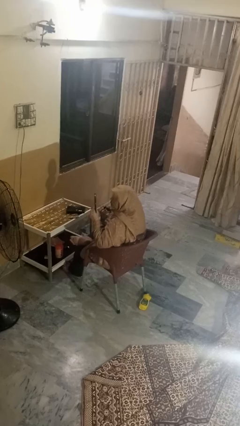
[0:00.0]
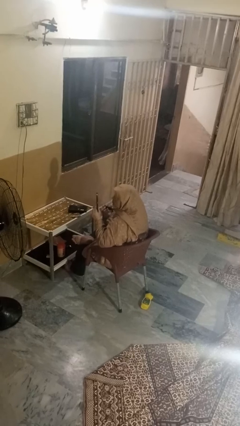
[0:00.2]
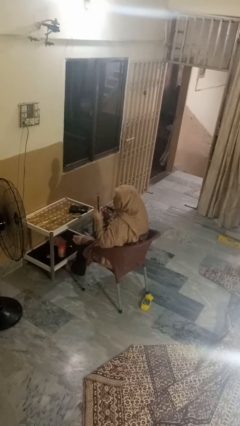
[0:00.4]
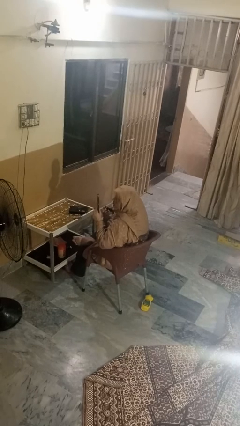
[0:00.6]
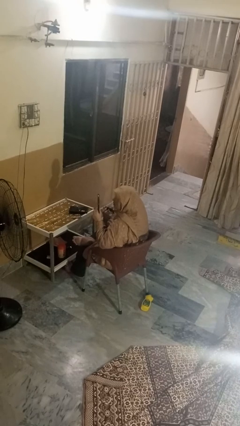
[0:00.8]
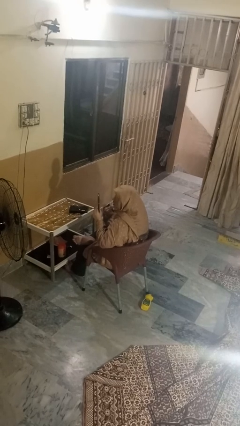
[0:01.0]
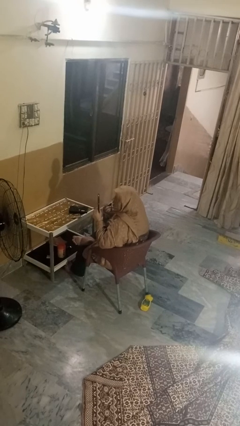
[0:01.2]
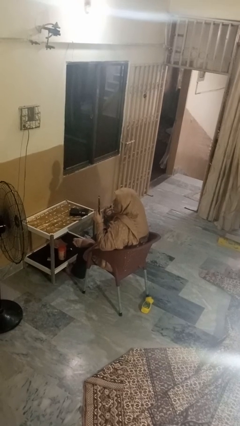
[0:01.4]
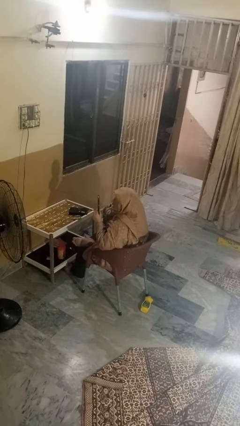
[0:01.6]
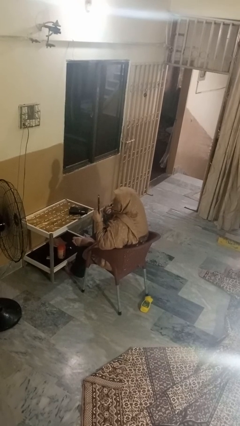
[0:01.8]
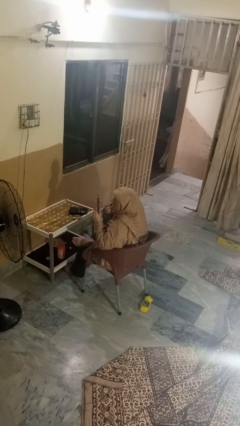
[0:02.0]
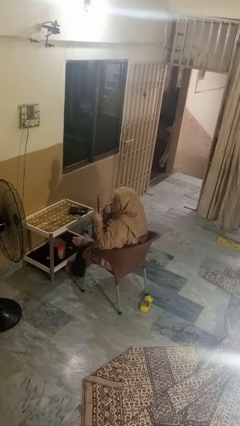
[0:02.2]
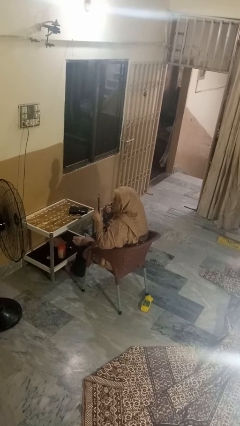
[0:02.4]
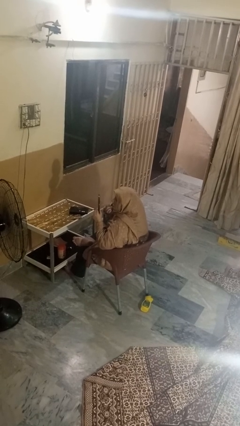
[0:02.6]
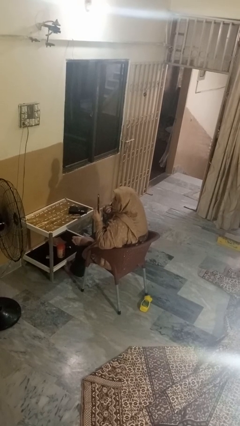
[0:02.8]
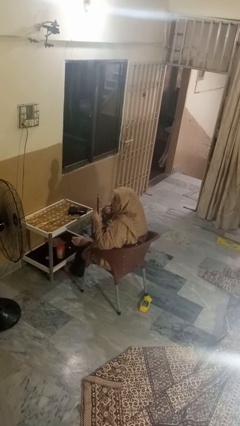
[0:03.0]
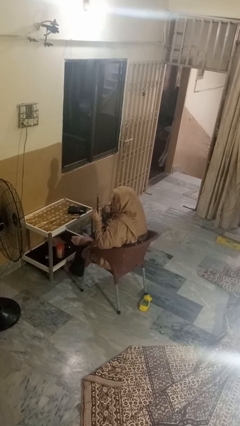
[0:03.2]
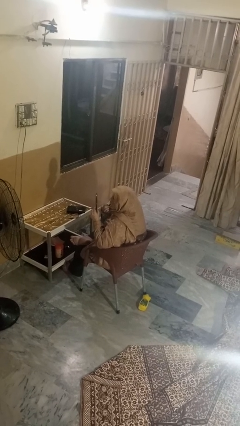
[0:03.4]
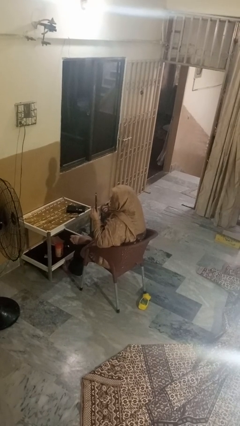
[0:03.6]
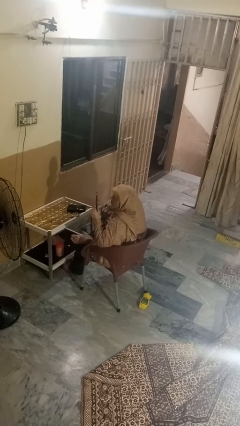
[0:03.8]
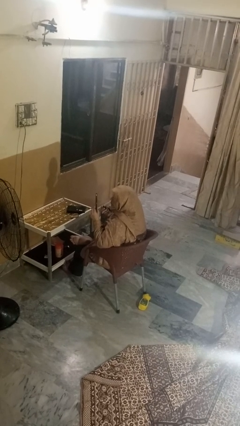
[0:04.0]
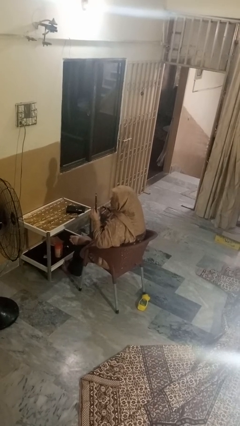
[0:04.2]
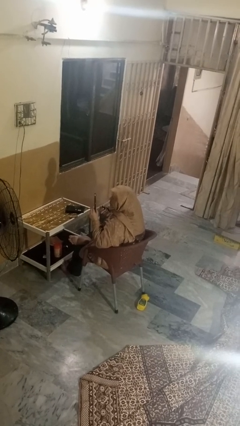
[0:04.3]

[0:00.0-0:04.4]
person applies lip makeup

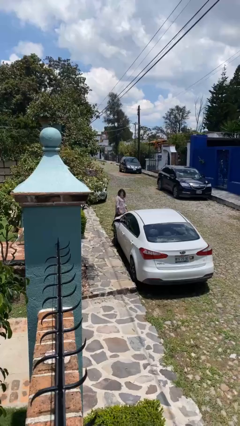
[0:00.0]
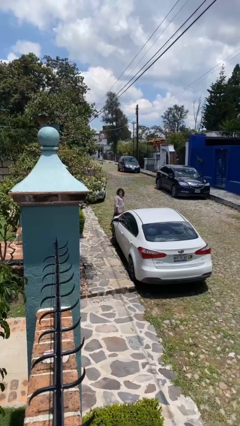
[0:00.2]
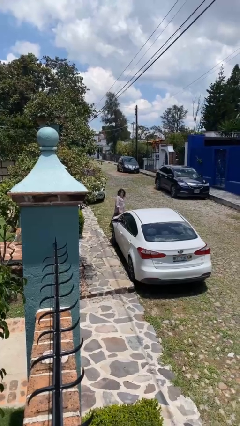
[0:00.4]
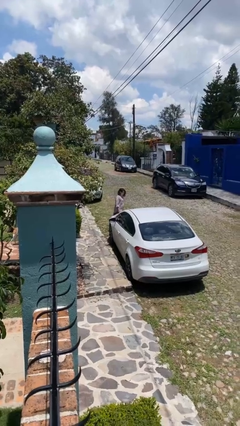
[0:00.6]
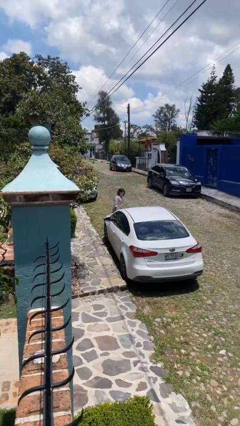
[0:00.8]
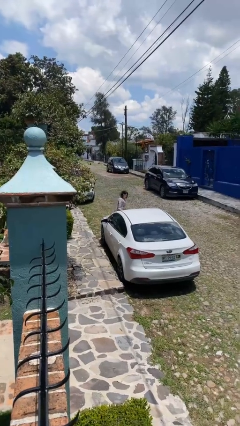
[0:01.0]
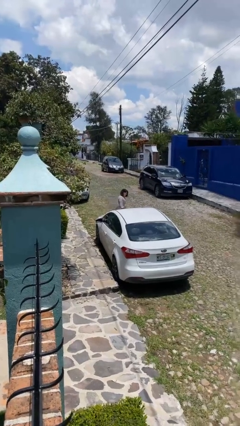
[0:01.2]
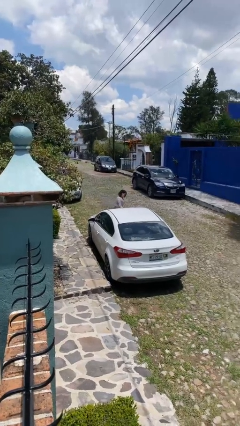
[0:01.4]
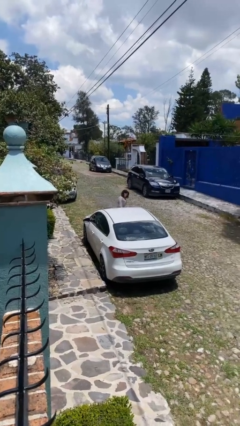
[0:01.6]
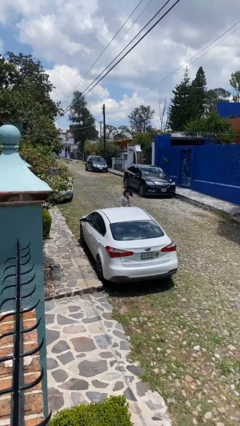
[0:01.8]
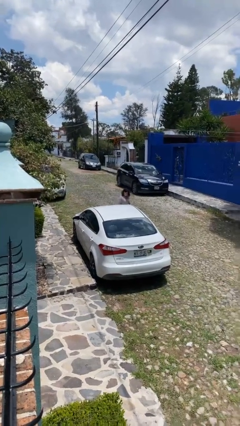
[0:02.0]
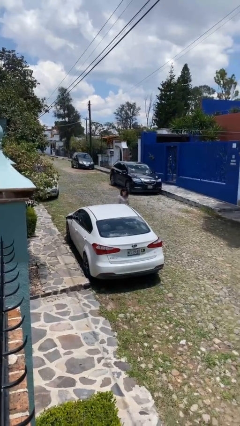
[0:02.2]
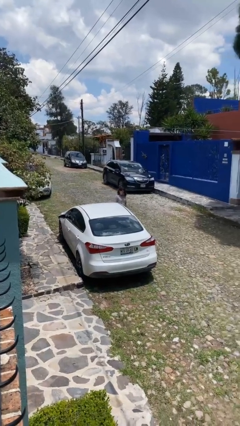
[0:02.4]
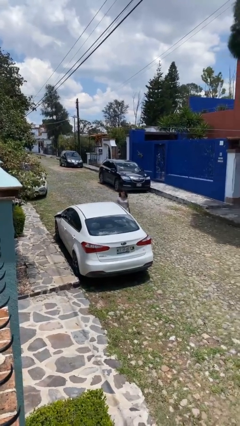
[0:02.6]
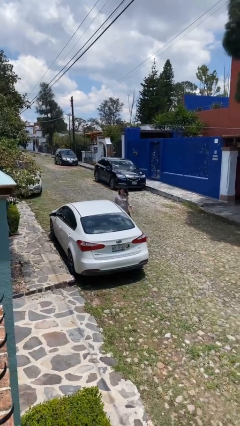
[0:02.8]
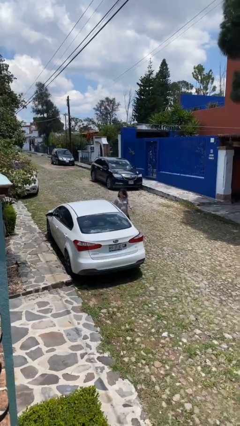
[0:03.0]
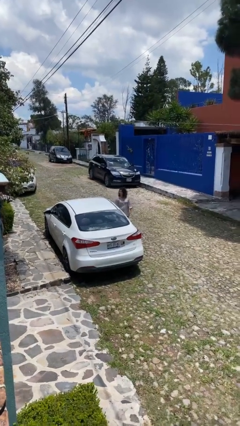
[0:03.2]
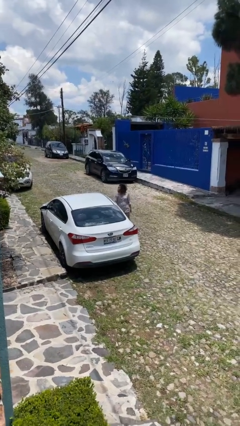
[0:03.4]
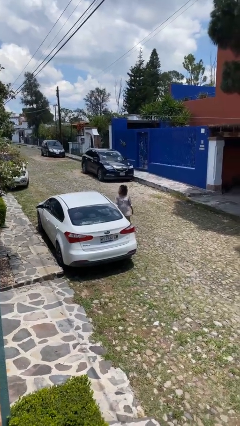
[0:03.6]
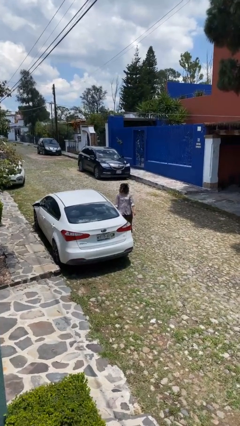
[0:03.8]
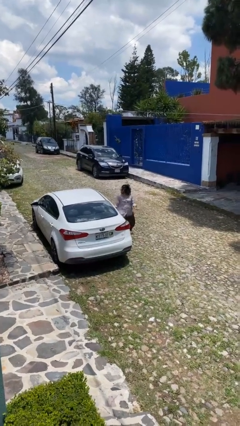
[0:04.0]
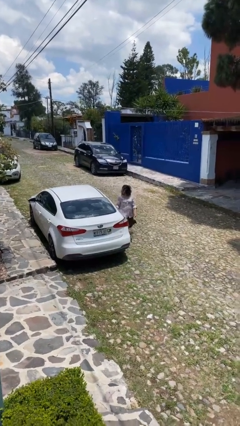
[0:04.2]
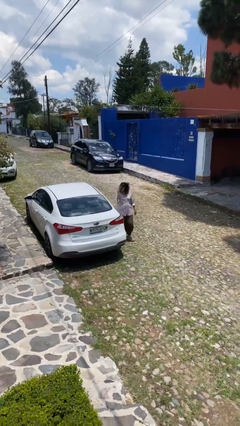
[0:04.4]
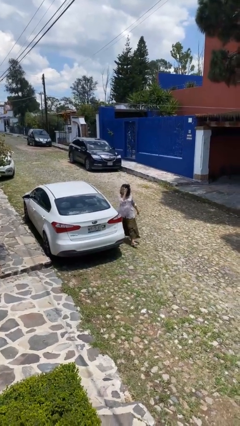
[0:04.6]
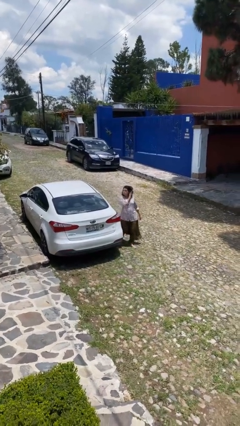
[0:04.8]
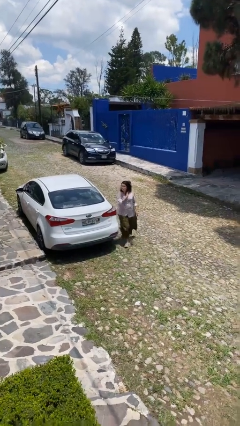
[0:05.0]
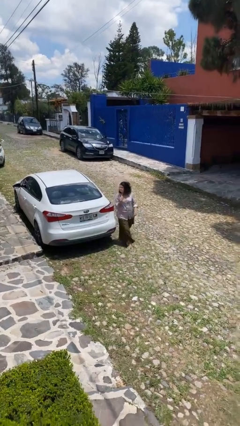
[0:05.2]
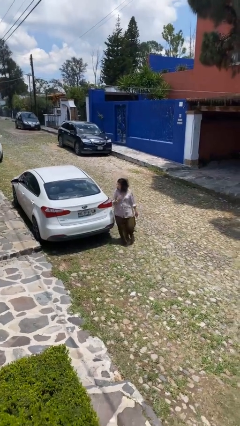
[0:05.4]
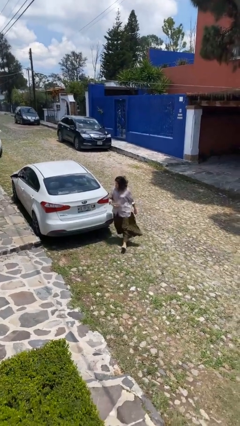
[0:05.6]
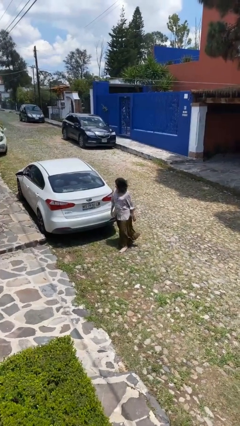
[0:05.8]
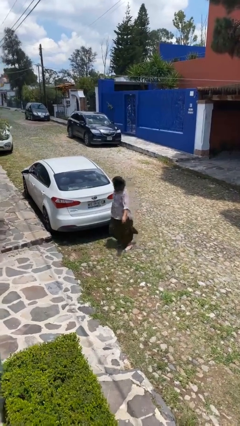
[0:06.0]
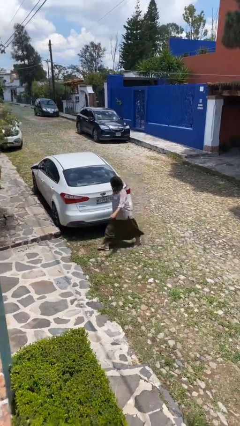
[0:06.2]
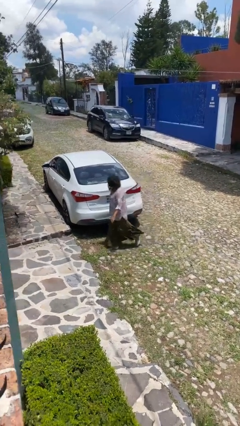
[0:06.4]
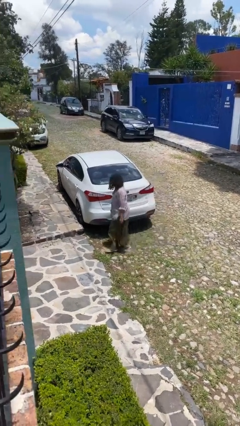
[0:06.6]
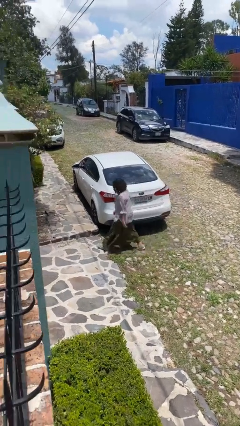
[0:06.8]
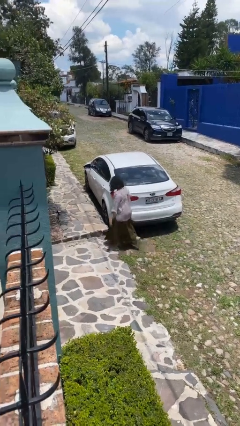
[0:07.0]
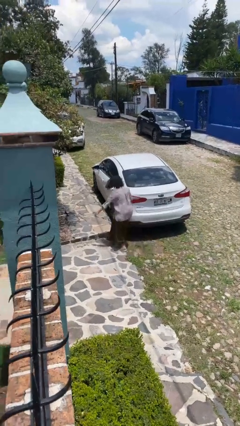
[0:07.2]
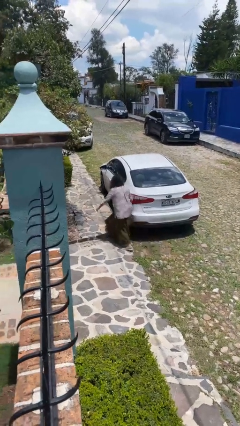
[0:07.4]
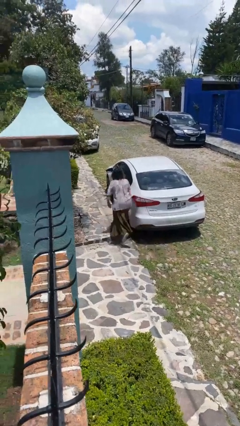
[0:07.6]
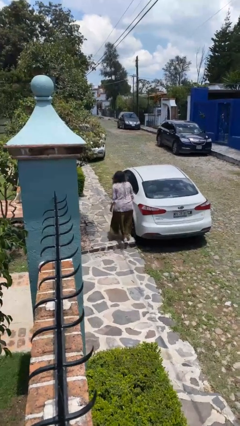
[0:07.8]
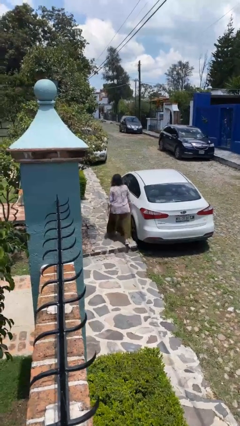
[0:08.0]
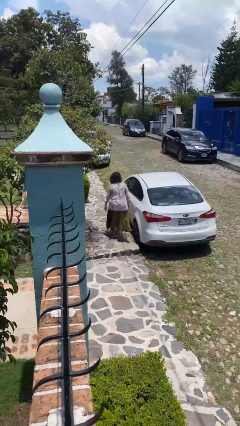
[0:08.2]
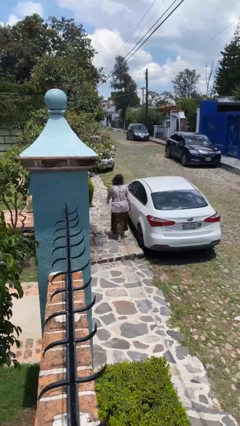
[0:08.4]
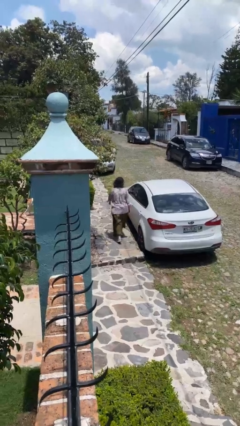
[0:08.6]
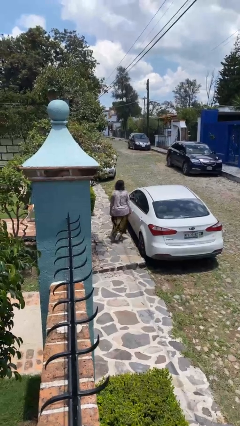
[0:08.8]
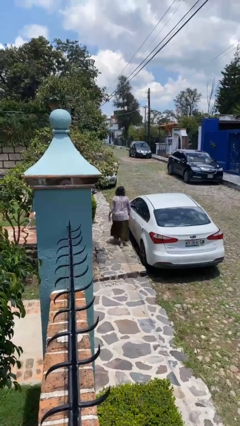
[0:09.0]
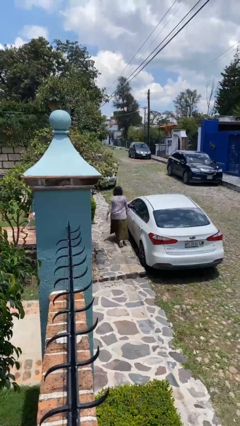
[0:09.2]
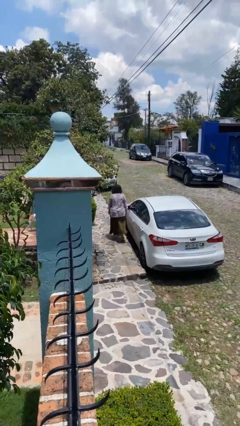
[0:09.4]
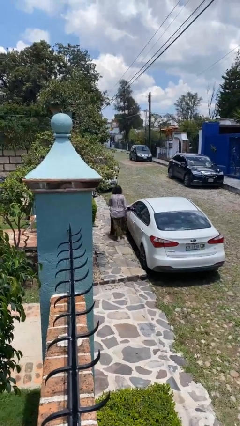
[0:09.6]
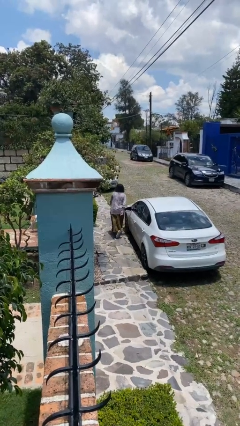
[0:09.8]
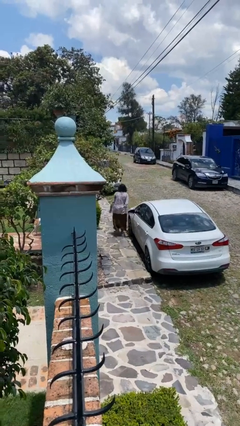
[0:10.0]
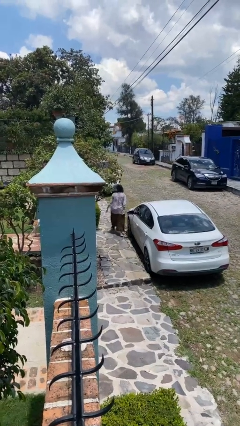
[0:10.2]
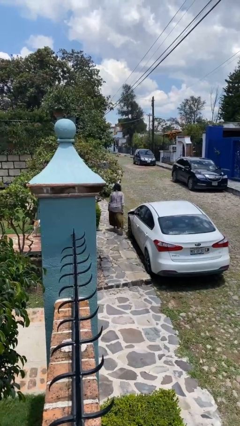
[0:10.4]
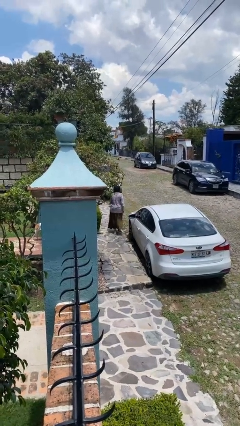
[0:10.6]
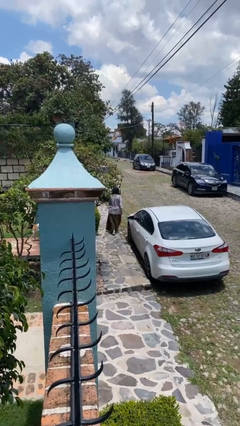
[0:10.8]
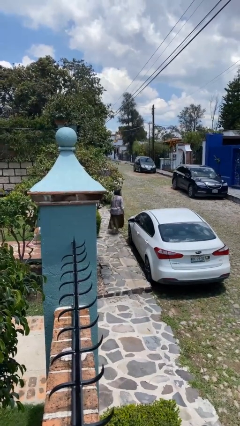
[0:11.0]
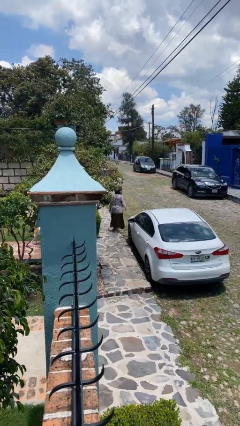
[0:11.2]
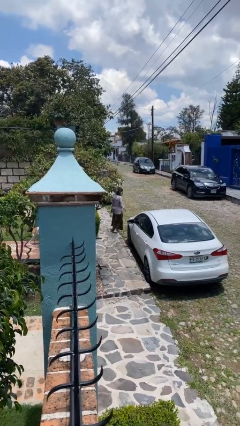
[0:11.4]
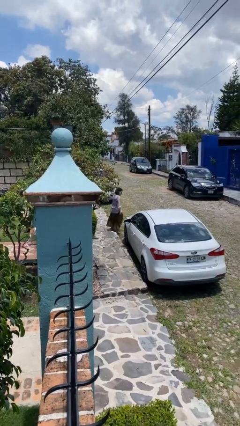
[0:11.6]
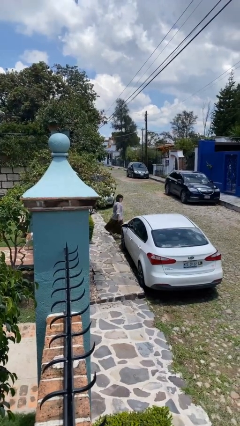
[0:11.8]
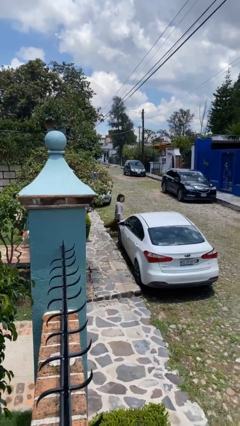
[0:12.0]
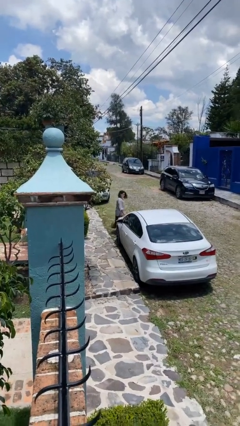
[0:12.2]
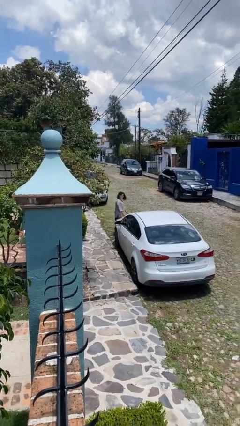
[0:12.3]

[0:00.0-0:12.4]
person walks around car

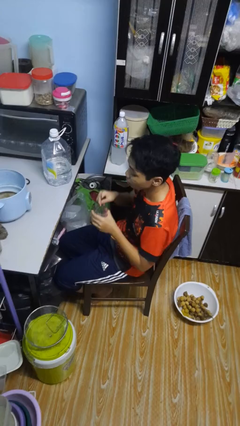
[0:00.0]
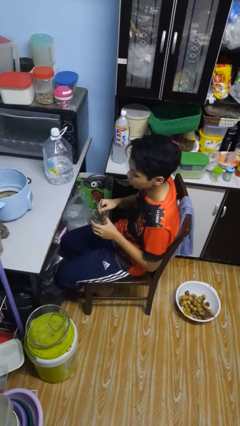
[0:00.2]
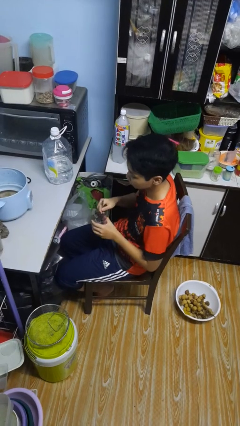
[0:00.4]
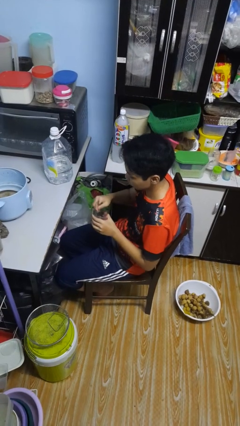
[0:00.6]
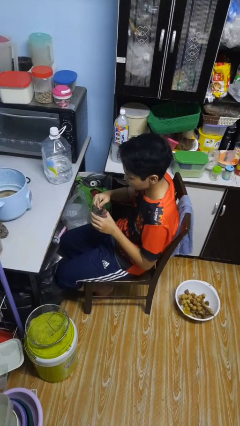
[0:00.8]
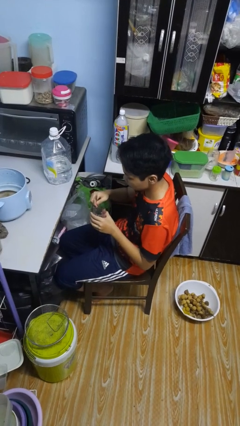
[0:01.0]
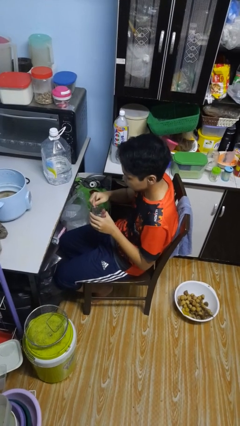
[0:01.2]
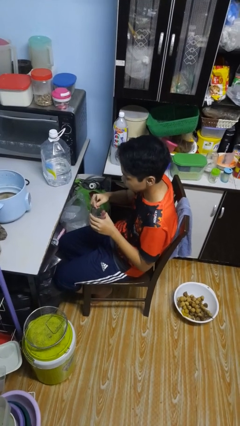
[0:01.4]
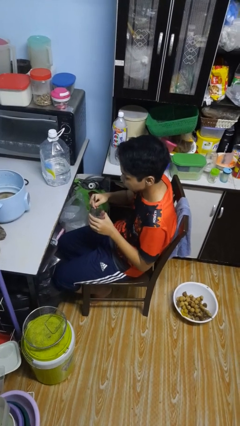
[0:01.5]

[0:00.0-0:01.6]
person stirs mug
